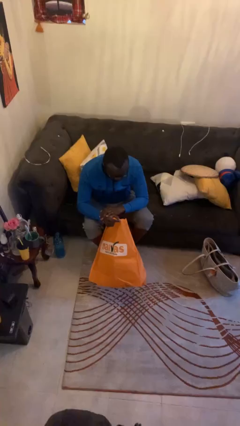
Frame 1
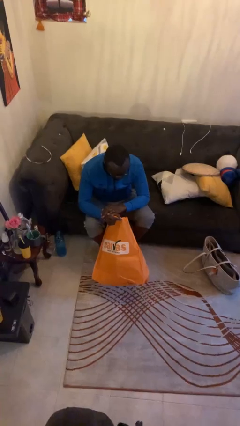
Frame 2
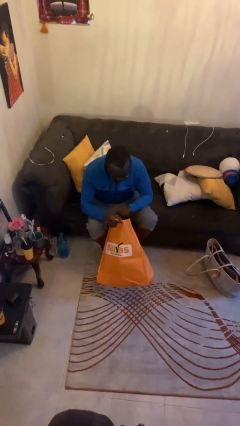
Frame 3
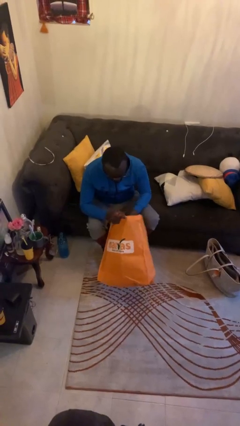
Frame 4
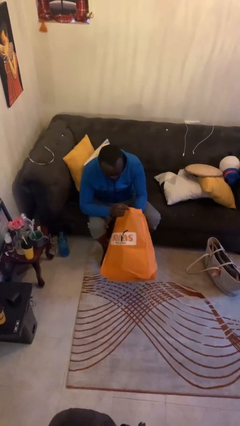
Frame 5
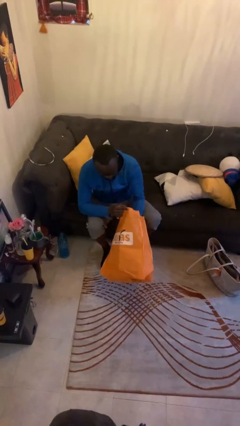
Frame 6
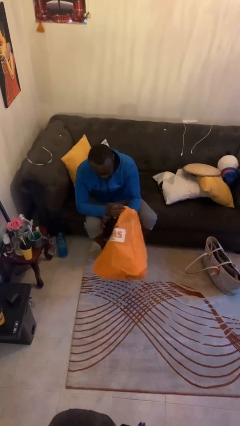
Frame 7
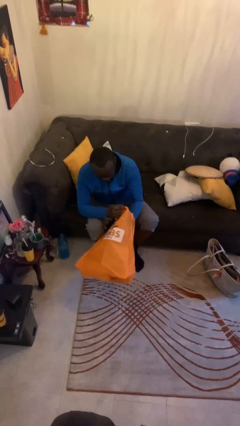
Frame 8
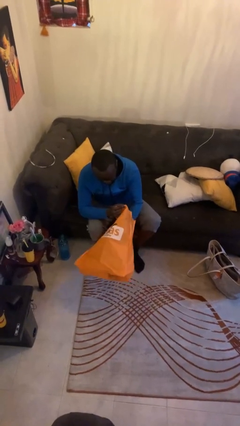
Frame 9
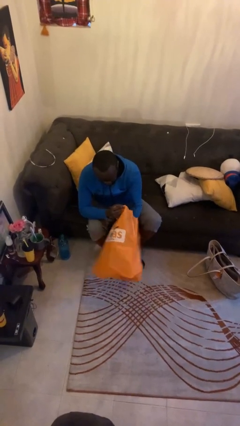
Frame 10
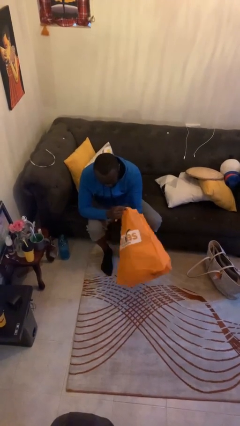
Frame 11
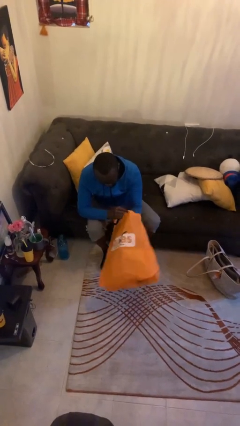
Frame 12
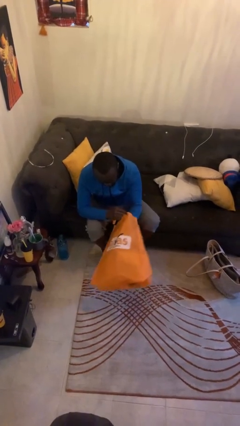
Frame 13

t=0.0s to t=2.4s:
person searches in bag

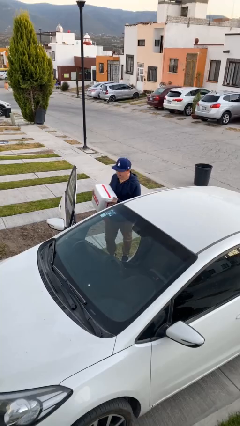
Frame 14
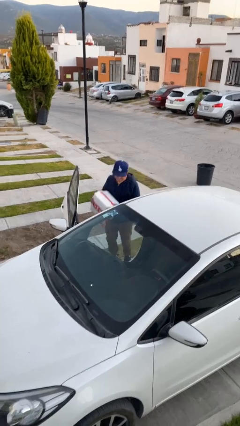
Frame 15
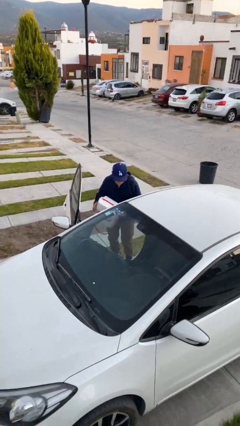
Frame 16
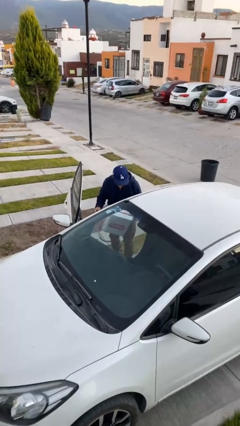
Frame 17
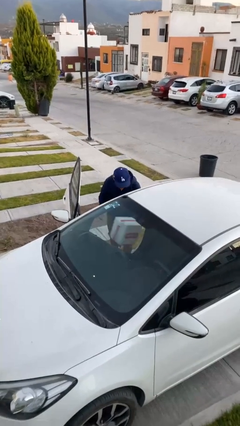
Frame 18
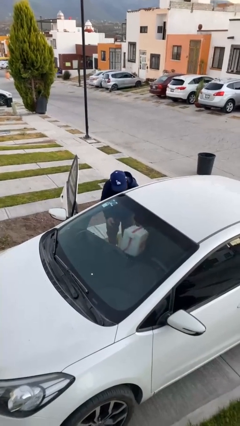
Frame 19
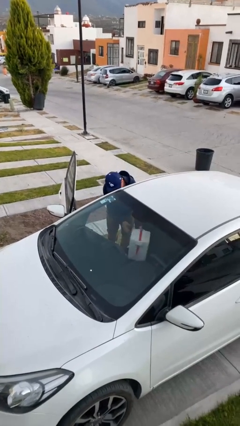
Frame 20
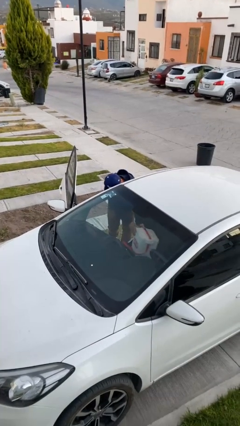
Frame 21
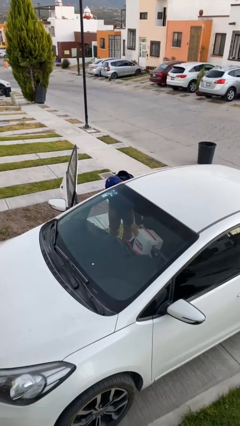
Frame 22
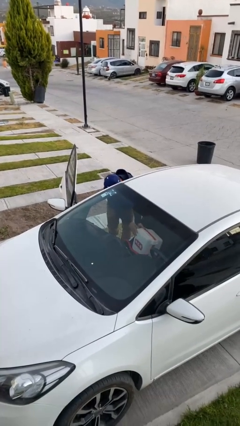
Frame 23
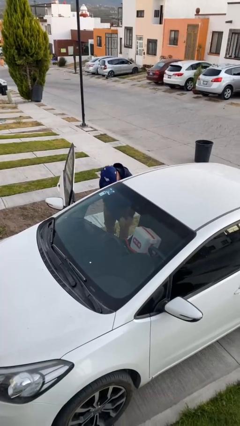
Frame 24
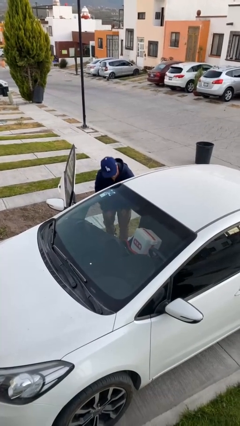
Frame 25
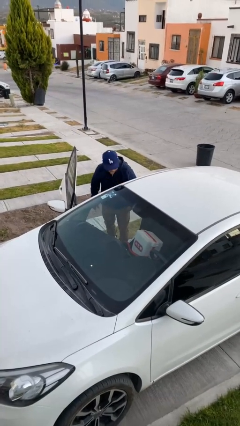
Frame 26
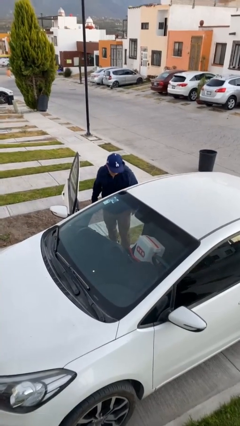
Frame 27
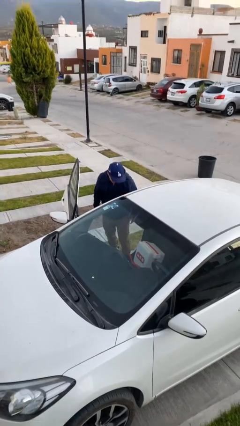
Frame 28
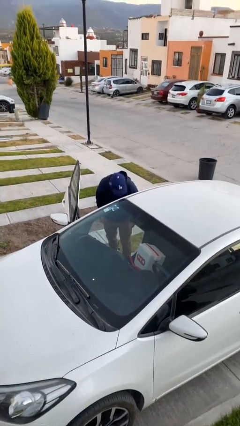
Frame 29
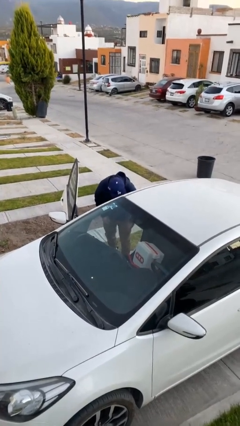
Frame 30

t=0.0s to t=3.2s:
person loads car

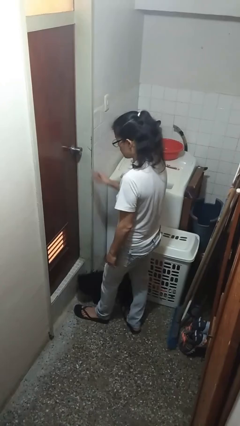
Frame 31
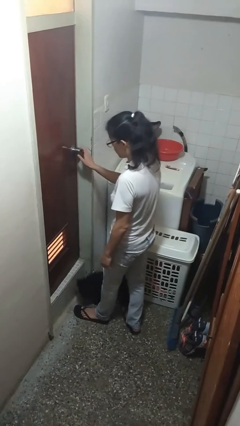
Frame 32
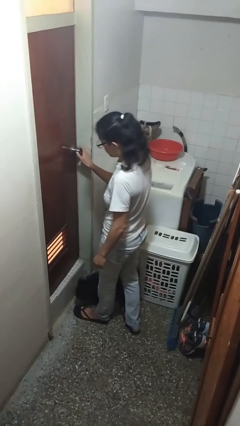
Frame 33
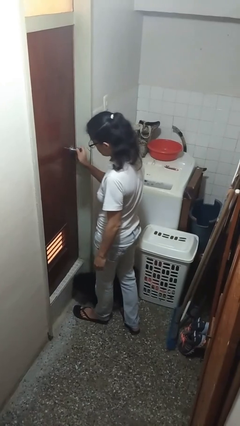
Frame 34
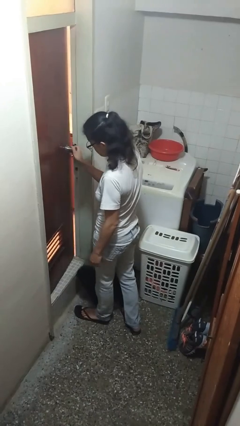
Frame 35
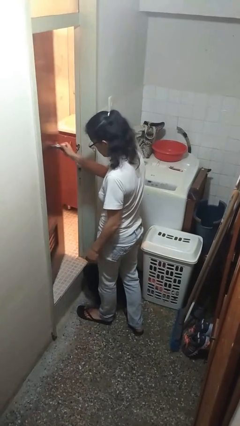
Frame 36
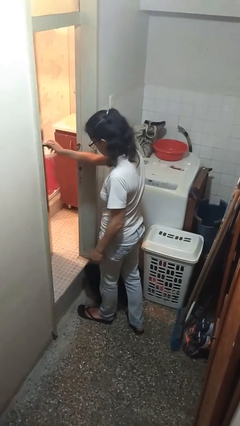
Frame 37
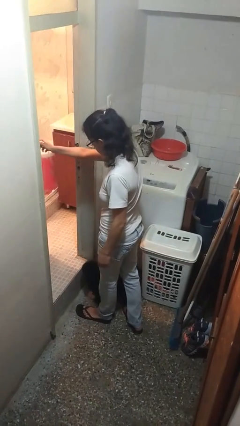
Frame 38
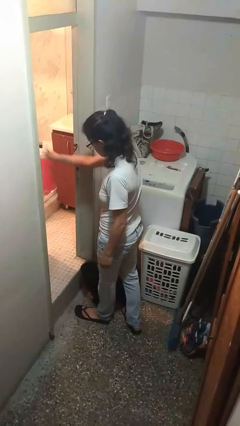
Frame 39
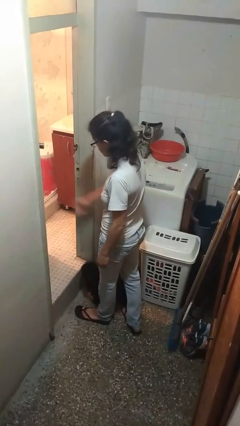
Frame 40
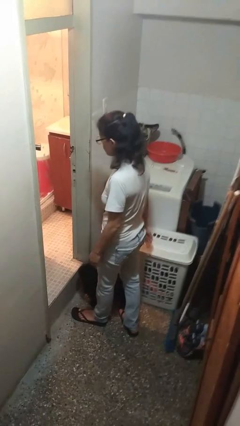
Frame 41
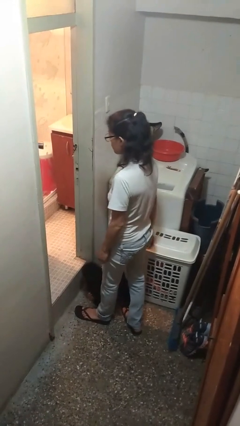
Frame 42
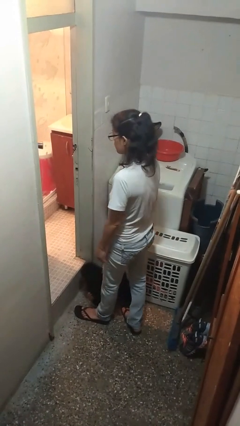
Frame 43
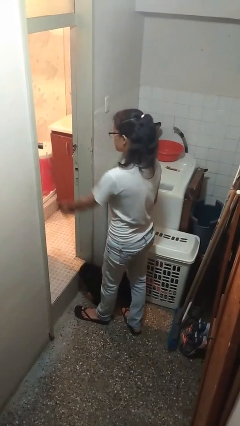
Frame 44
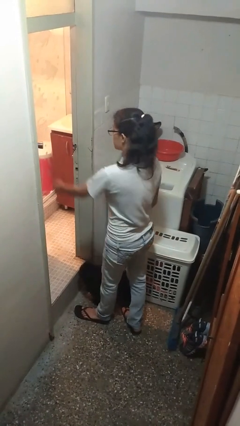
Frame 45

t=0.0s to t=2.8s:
person opens facility door

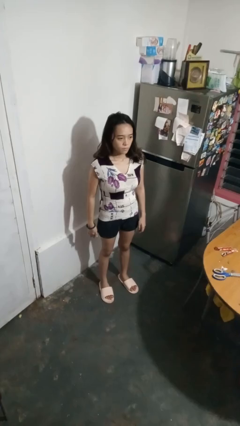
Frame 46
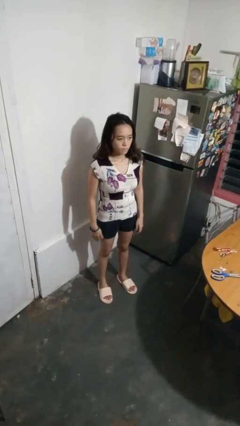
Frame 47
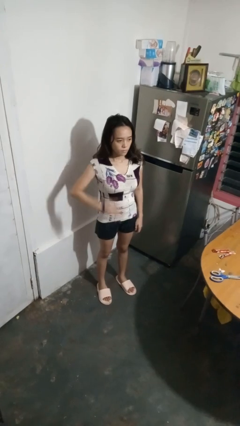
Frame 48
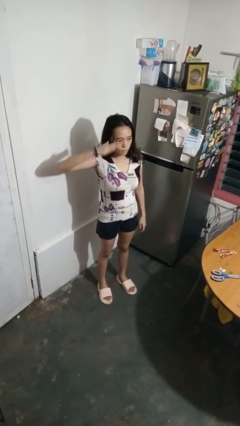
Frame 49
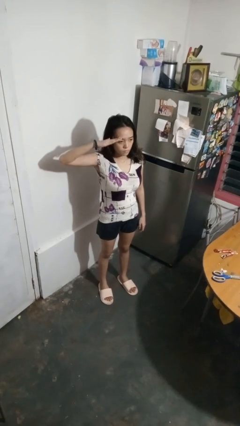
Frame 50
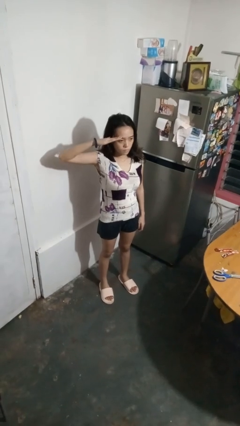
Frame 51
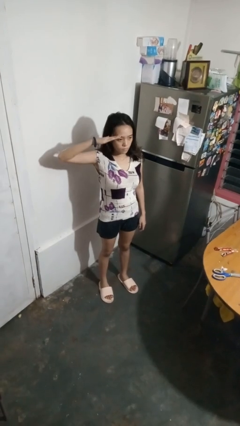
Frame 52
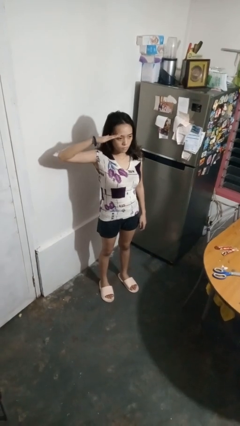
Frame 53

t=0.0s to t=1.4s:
person salutes

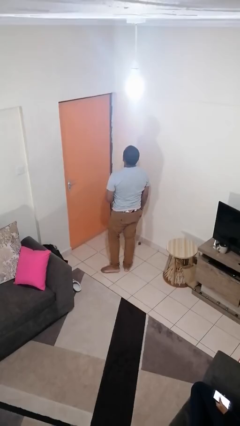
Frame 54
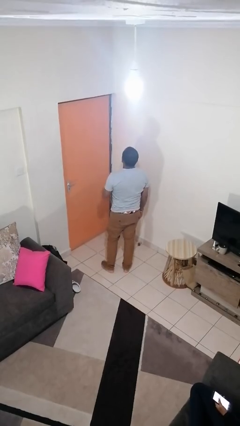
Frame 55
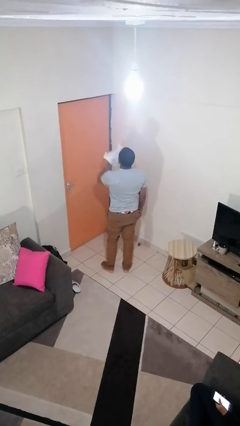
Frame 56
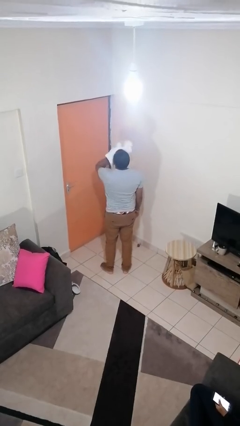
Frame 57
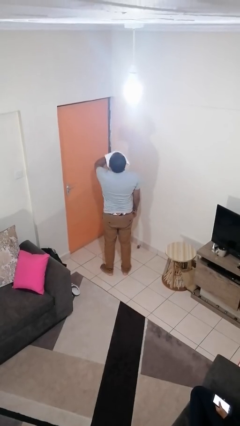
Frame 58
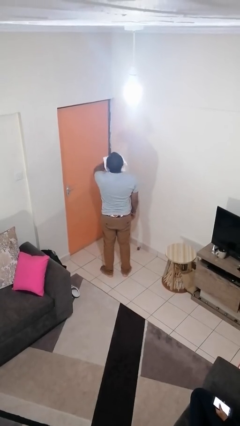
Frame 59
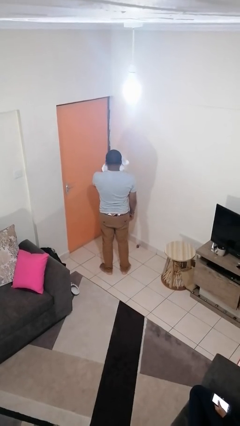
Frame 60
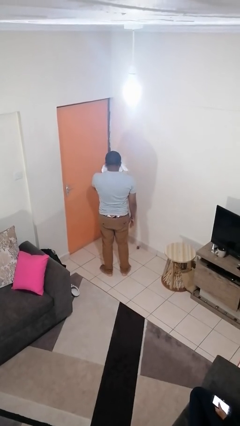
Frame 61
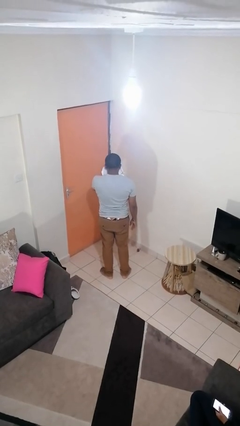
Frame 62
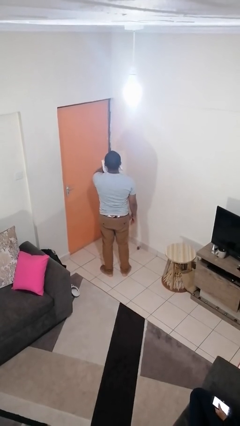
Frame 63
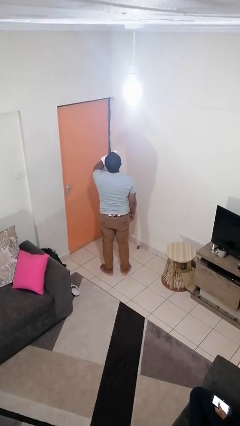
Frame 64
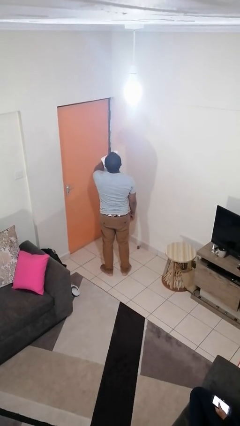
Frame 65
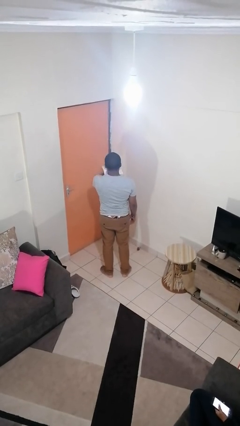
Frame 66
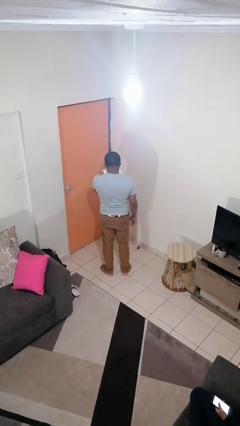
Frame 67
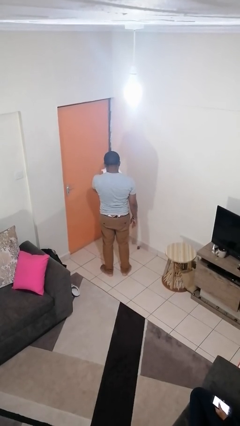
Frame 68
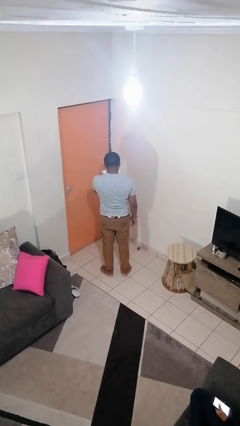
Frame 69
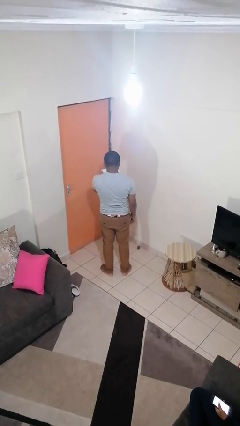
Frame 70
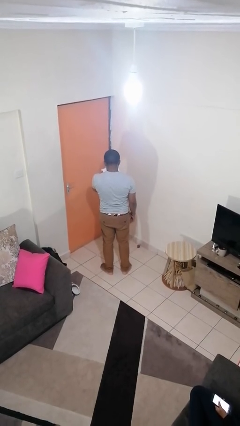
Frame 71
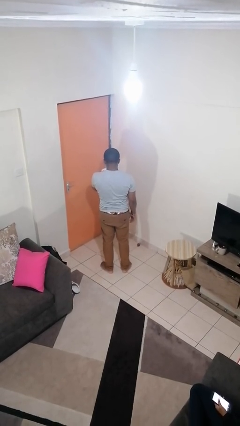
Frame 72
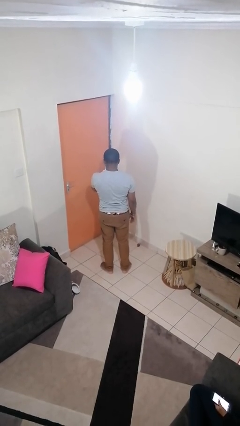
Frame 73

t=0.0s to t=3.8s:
person blows nose

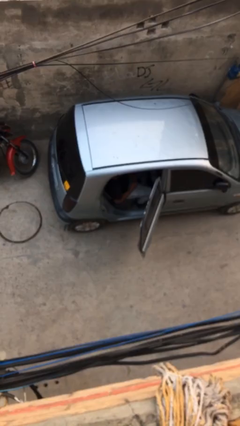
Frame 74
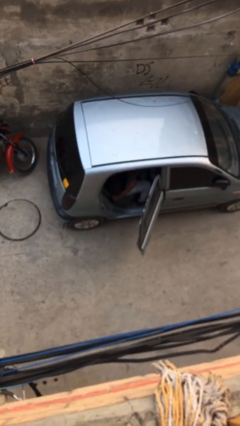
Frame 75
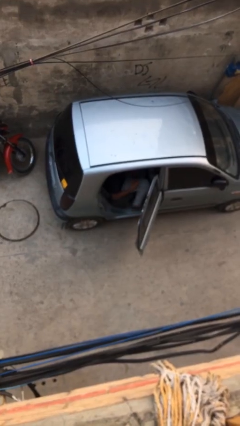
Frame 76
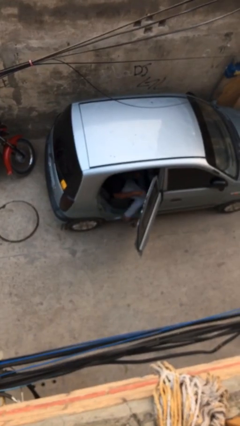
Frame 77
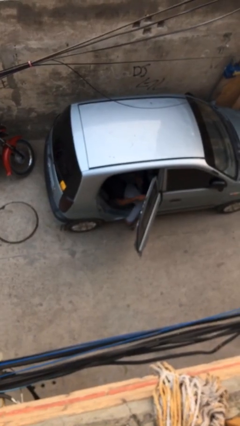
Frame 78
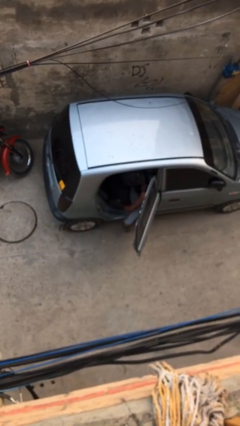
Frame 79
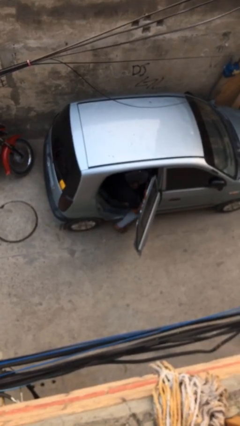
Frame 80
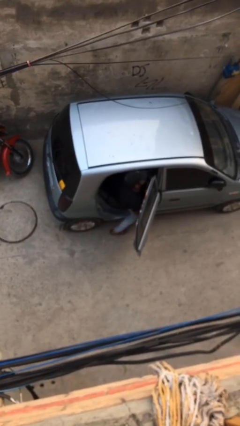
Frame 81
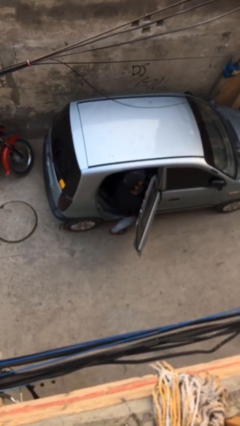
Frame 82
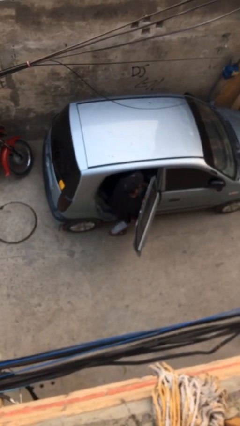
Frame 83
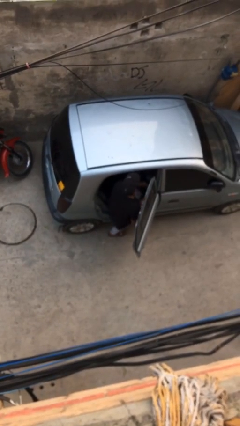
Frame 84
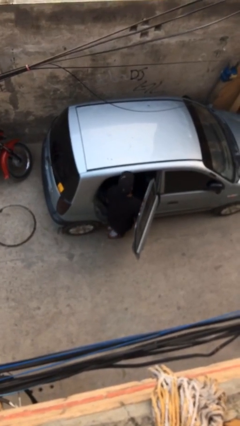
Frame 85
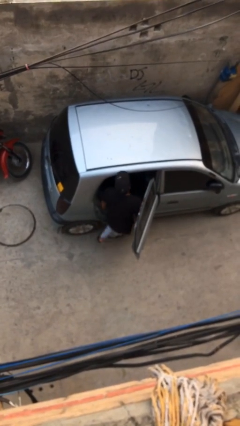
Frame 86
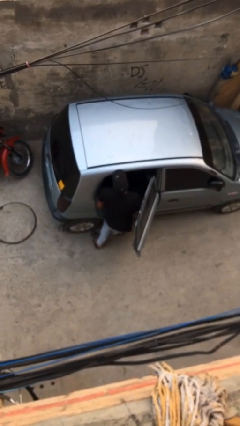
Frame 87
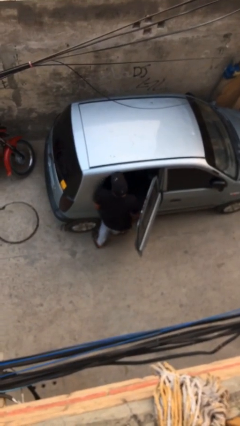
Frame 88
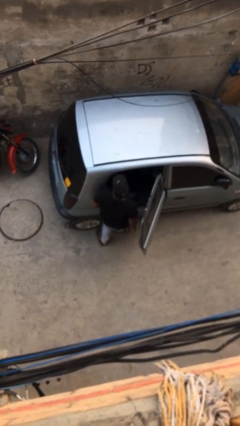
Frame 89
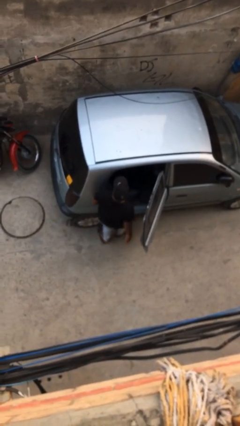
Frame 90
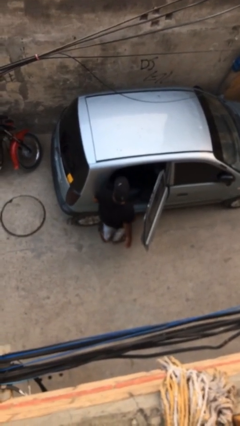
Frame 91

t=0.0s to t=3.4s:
person exits car

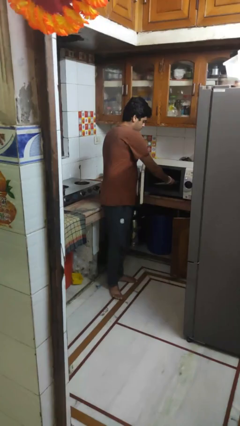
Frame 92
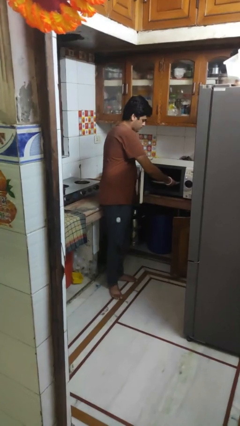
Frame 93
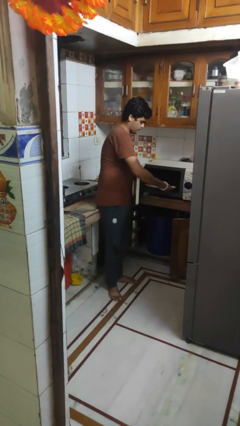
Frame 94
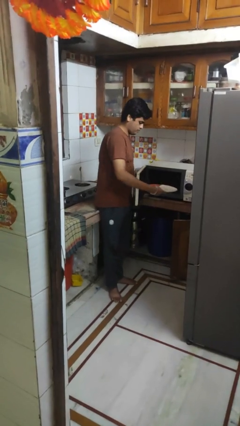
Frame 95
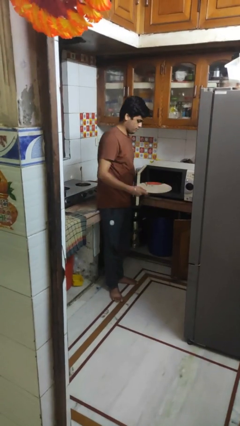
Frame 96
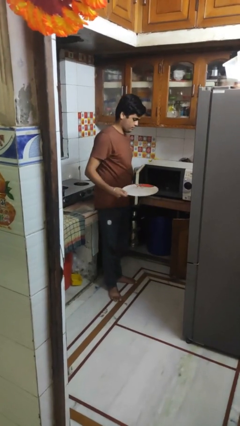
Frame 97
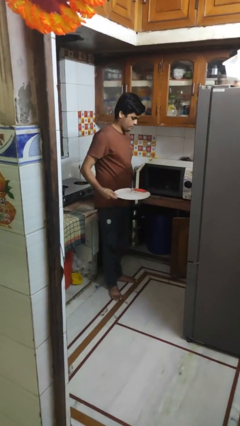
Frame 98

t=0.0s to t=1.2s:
person takes object from microwave
